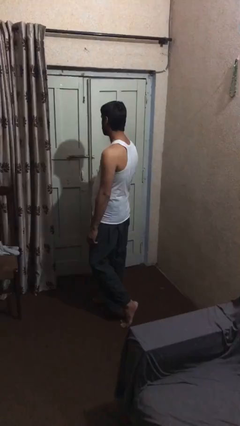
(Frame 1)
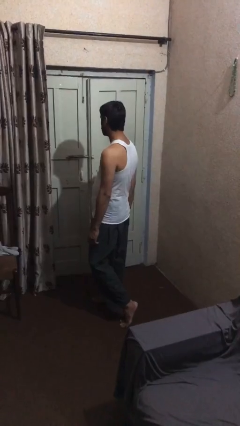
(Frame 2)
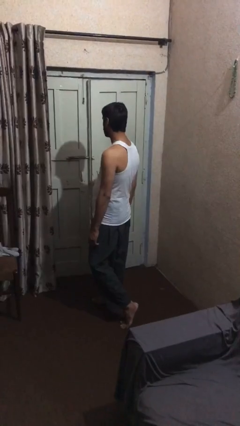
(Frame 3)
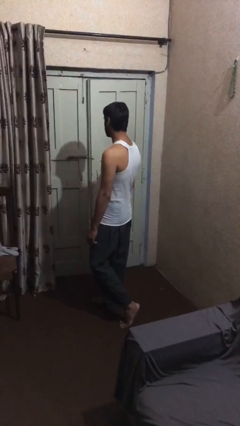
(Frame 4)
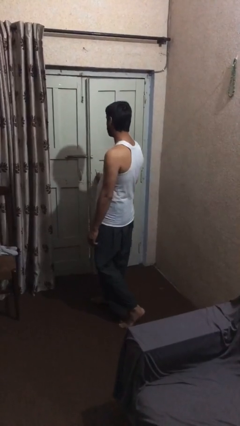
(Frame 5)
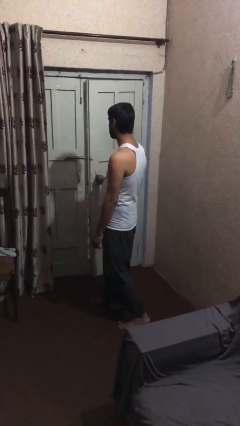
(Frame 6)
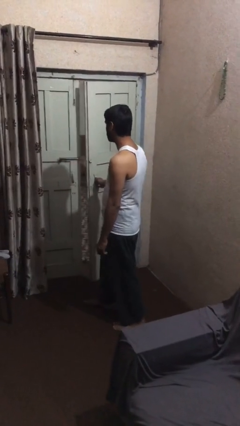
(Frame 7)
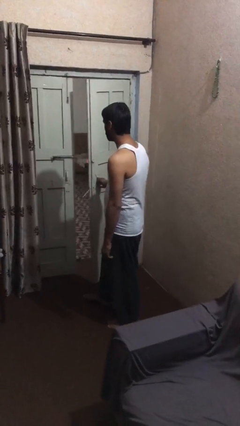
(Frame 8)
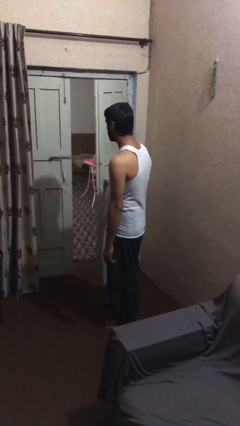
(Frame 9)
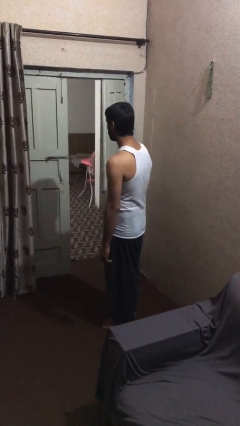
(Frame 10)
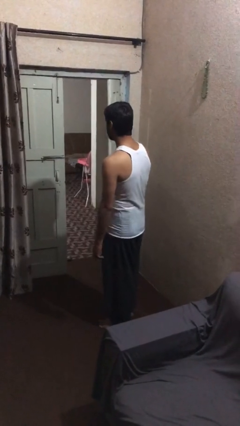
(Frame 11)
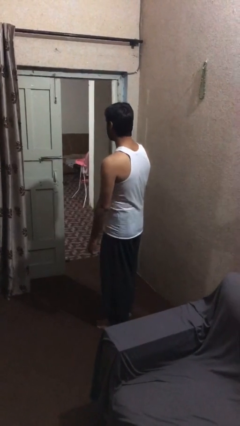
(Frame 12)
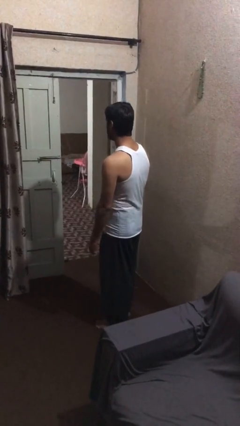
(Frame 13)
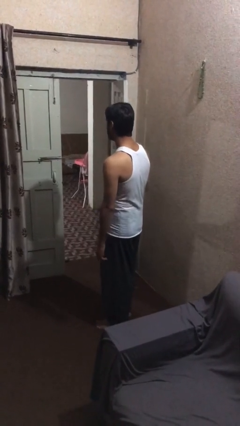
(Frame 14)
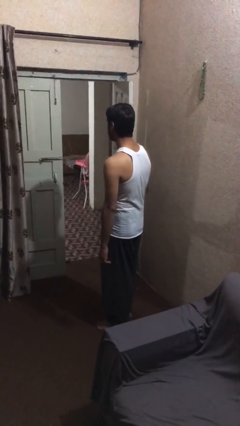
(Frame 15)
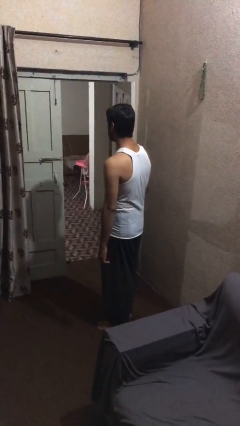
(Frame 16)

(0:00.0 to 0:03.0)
person opens facility door

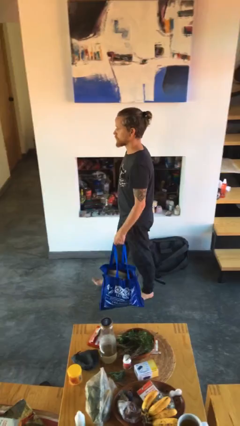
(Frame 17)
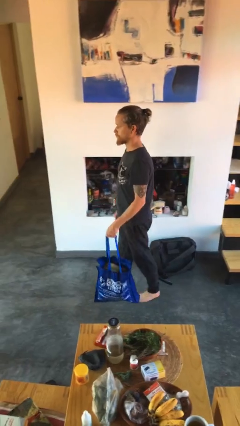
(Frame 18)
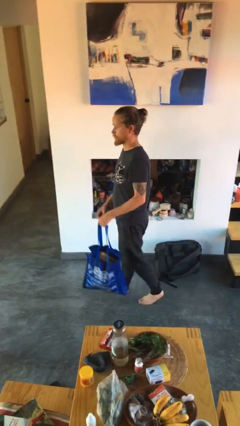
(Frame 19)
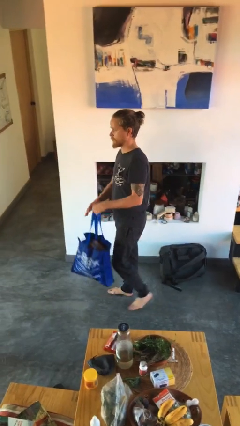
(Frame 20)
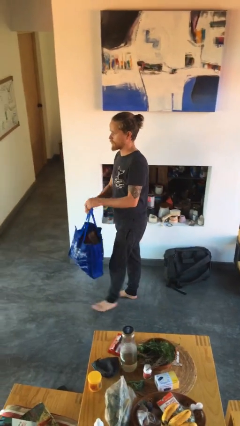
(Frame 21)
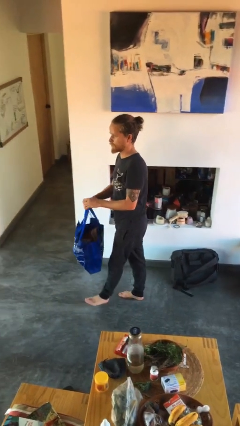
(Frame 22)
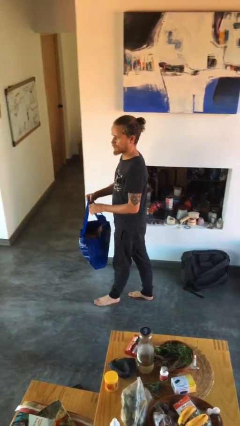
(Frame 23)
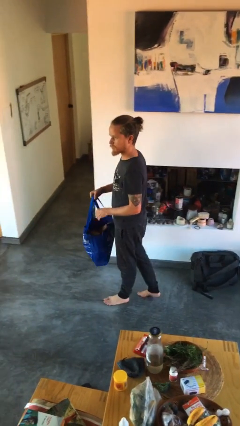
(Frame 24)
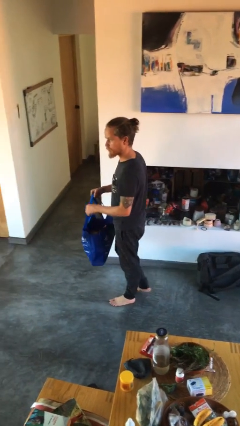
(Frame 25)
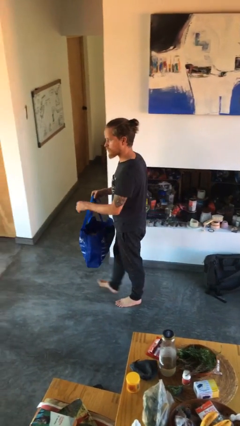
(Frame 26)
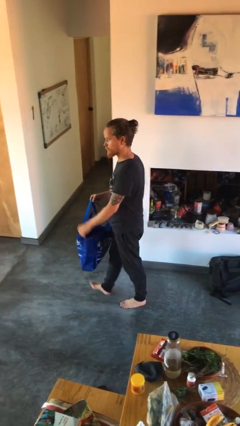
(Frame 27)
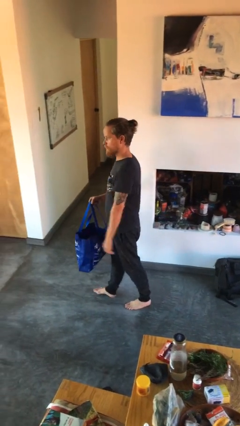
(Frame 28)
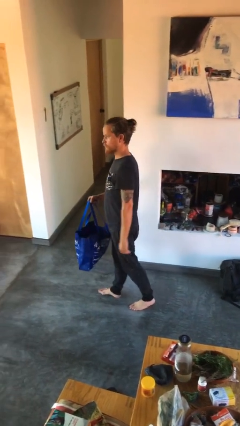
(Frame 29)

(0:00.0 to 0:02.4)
person carries groceries

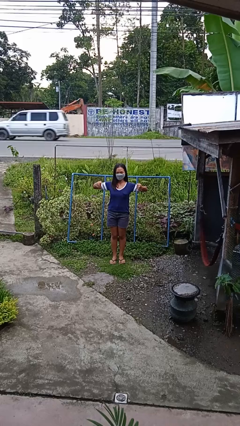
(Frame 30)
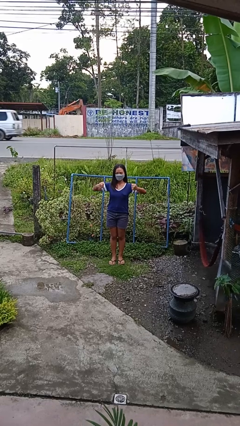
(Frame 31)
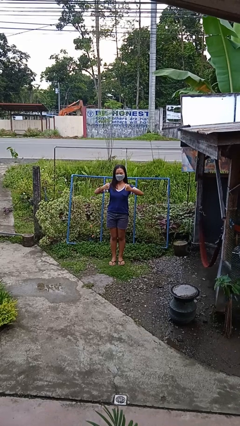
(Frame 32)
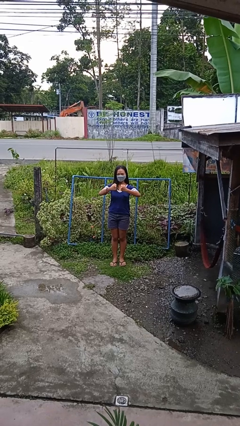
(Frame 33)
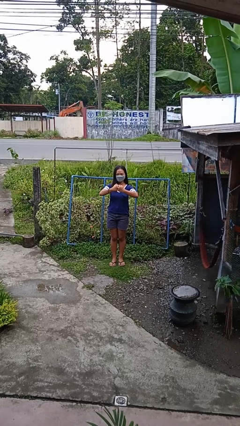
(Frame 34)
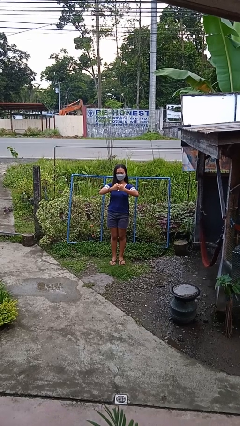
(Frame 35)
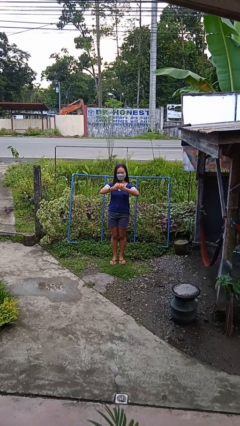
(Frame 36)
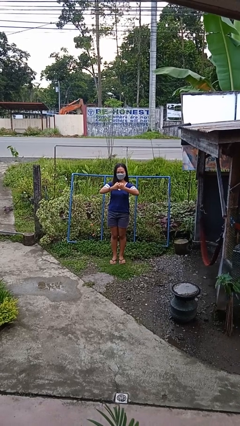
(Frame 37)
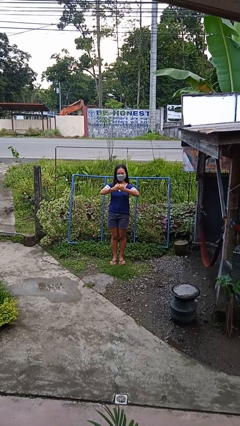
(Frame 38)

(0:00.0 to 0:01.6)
person gestures zoom out

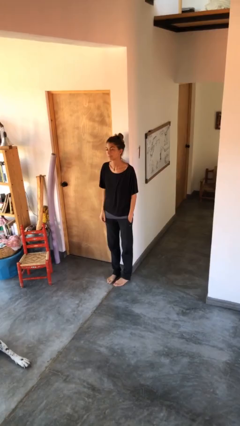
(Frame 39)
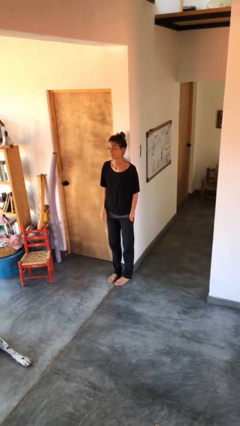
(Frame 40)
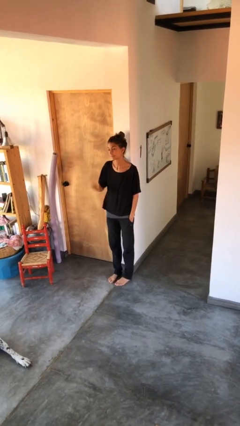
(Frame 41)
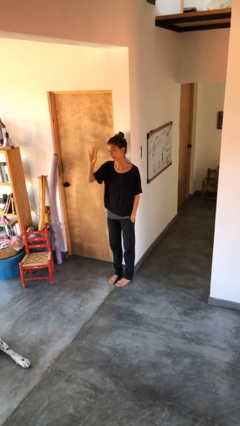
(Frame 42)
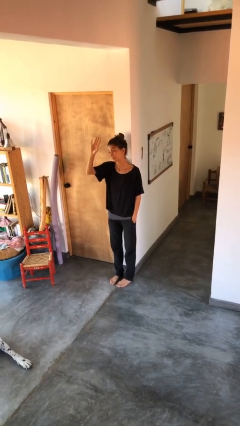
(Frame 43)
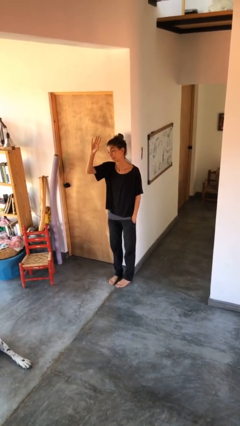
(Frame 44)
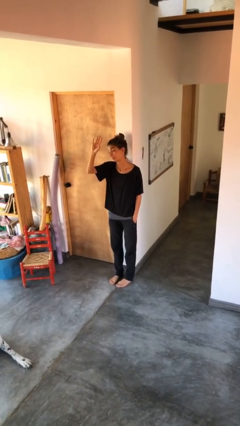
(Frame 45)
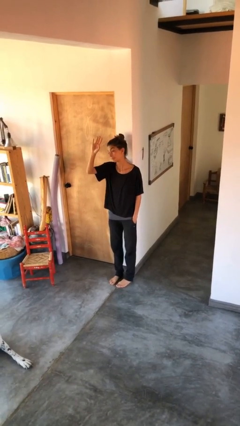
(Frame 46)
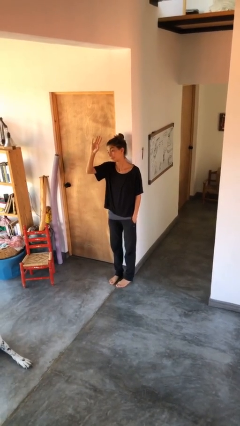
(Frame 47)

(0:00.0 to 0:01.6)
person gestures raise hand

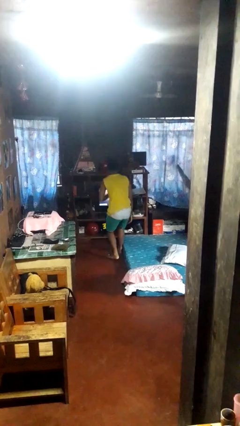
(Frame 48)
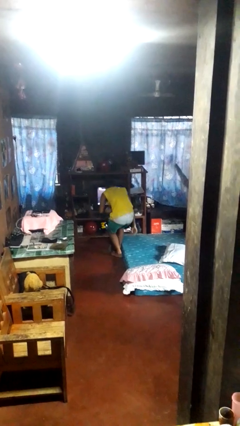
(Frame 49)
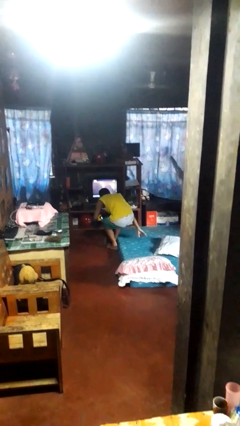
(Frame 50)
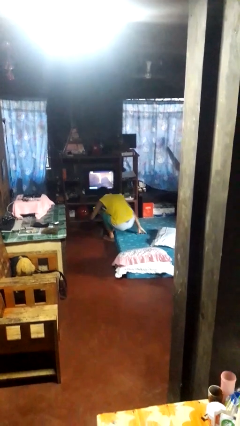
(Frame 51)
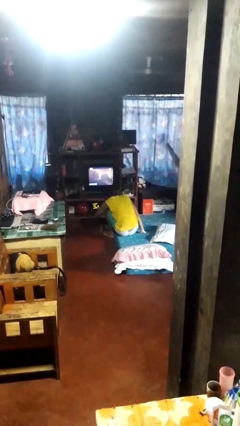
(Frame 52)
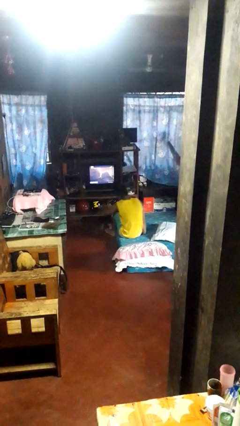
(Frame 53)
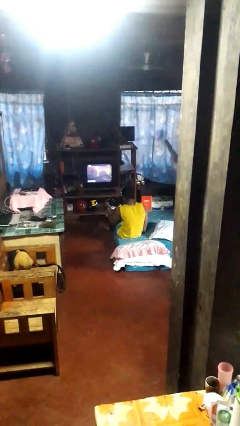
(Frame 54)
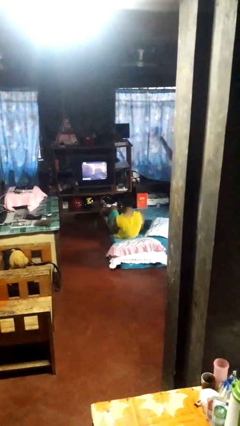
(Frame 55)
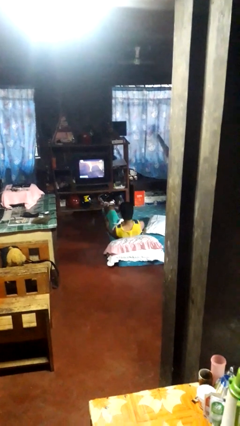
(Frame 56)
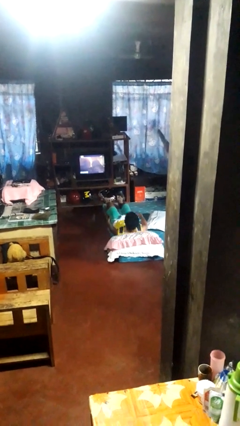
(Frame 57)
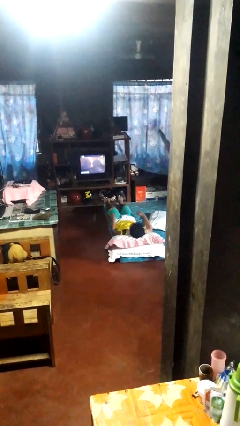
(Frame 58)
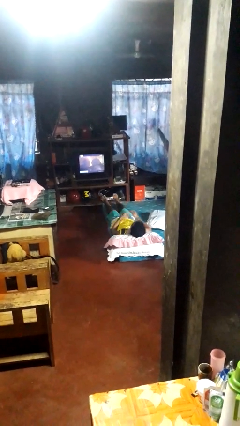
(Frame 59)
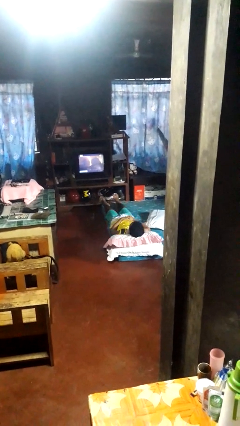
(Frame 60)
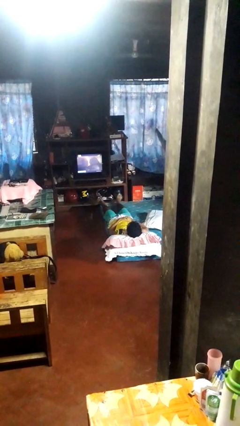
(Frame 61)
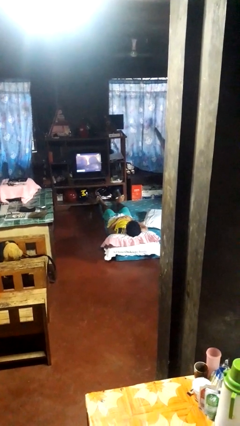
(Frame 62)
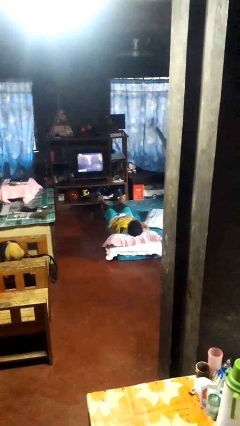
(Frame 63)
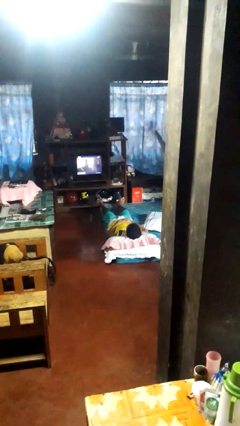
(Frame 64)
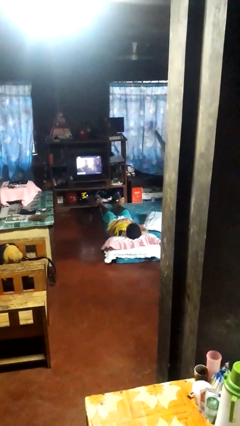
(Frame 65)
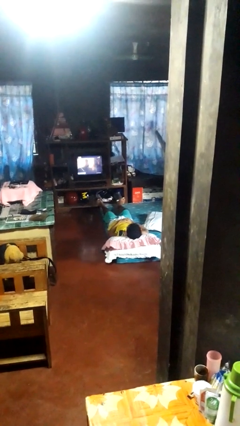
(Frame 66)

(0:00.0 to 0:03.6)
person lies down on bed

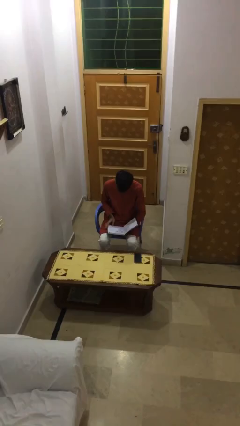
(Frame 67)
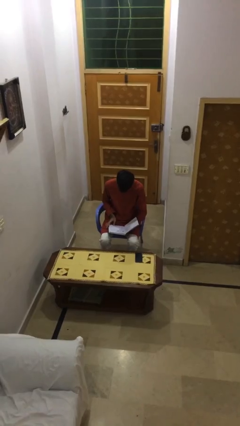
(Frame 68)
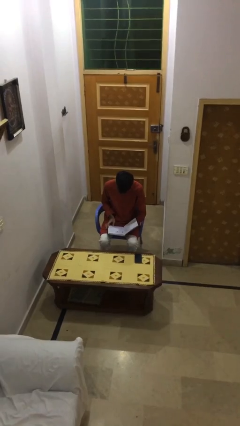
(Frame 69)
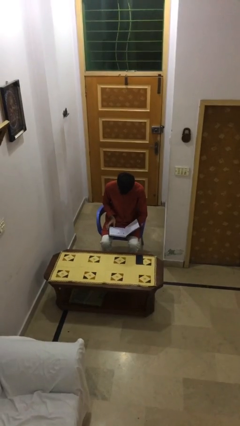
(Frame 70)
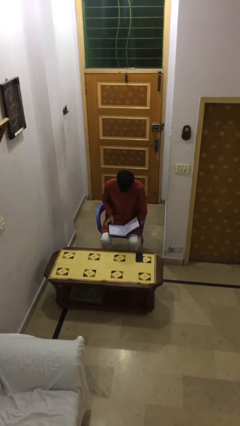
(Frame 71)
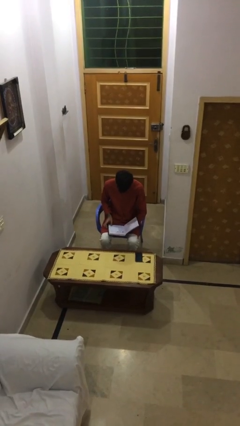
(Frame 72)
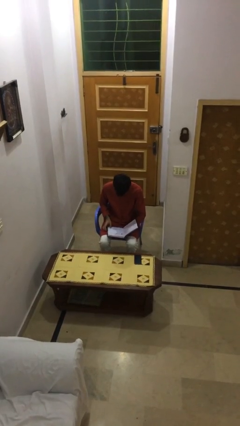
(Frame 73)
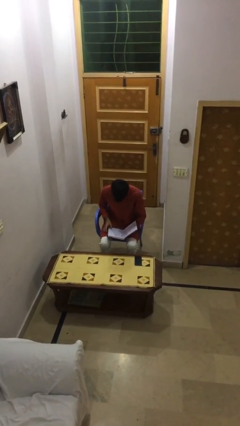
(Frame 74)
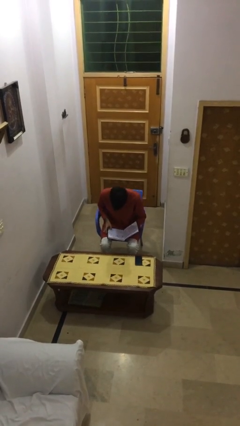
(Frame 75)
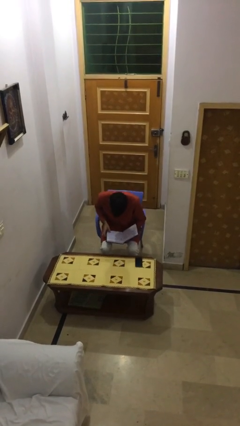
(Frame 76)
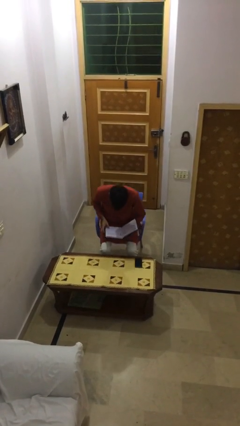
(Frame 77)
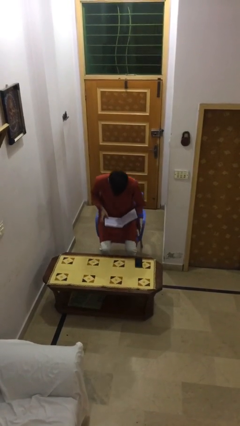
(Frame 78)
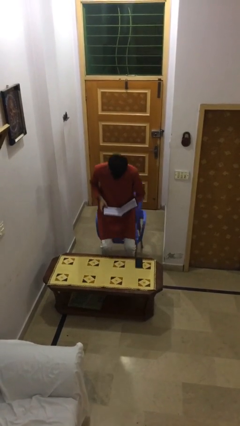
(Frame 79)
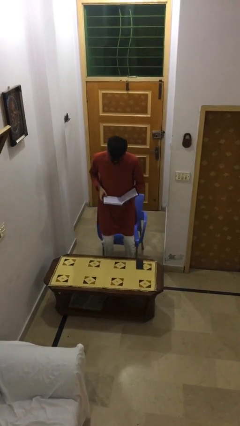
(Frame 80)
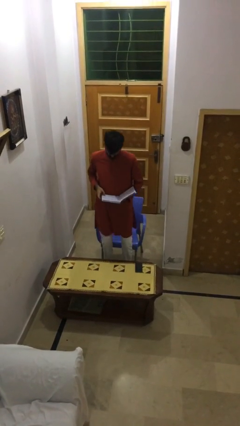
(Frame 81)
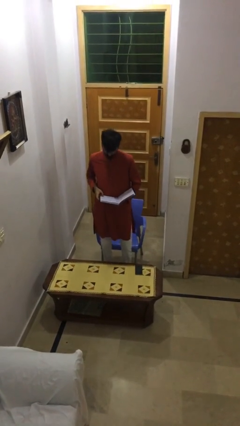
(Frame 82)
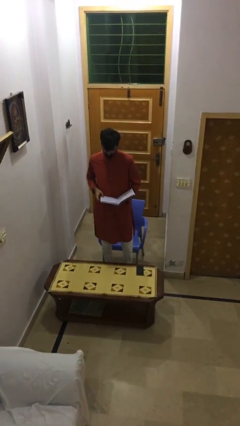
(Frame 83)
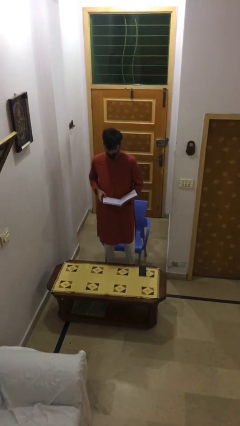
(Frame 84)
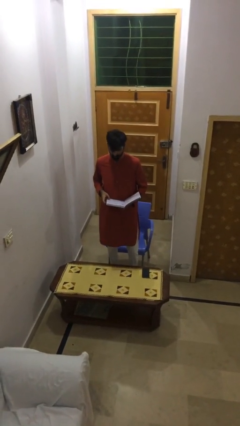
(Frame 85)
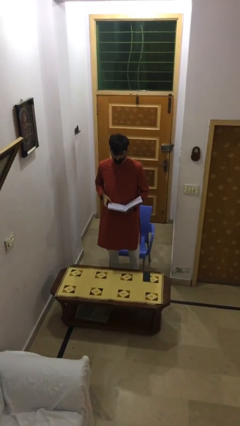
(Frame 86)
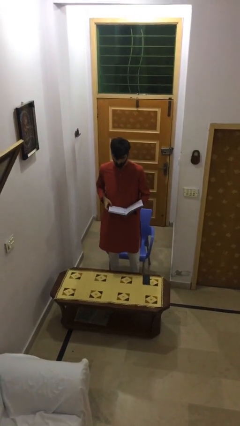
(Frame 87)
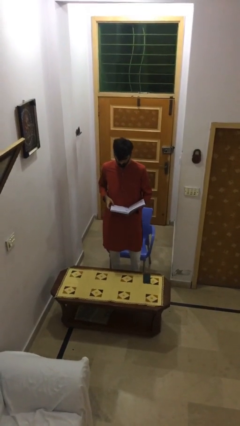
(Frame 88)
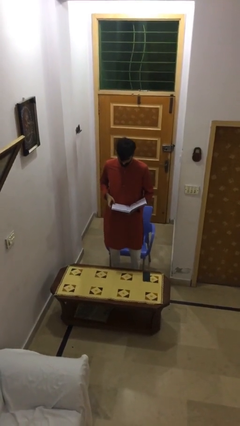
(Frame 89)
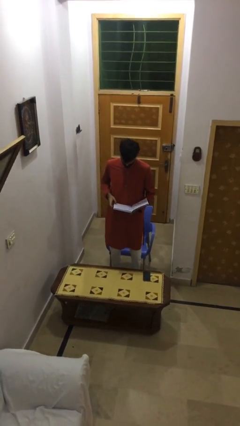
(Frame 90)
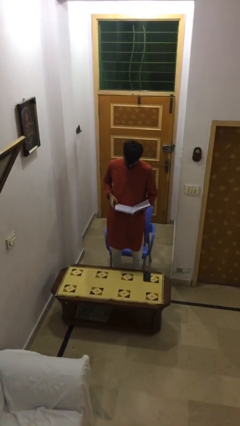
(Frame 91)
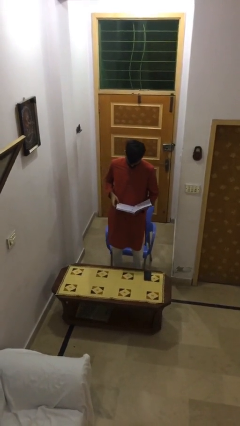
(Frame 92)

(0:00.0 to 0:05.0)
person stands up
